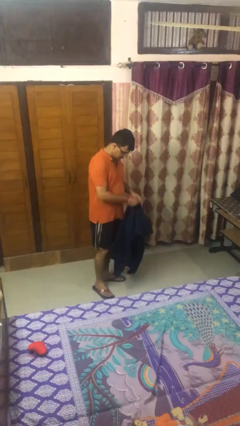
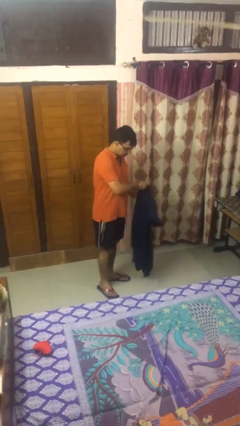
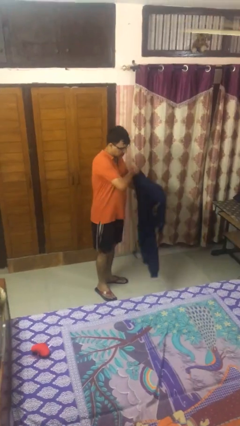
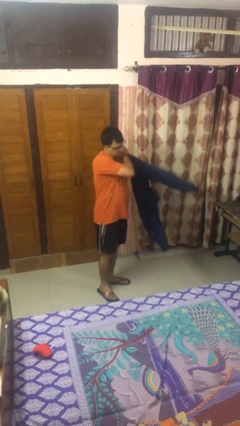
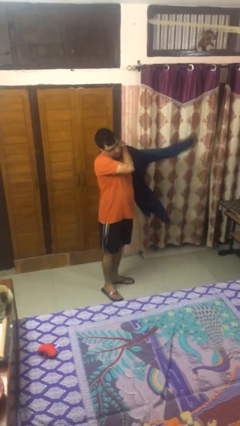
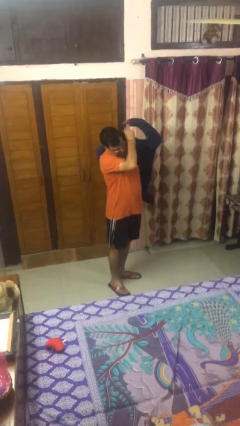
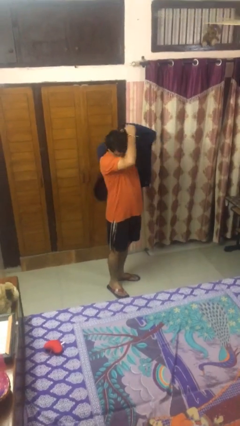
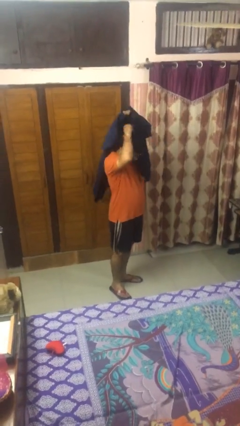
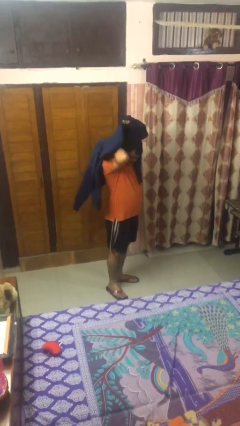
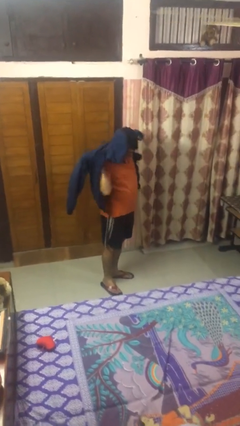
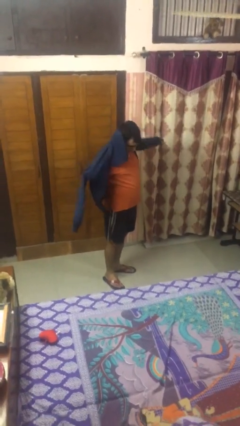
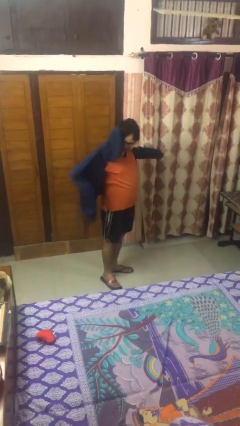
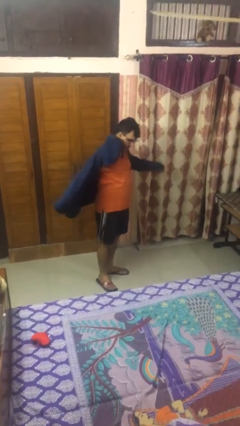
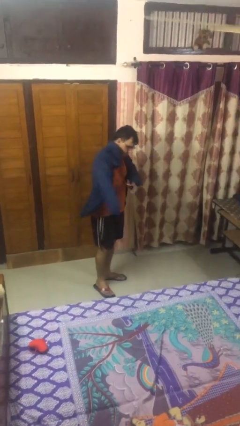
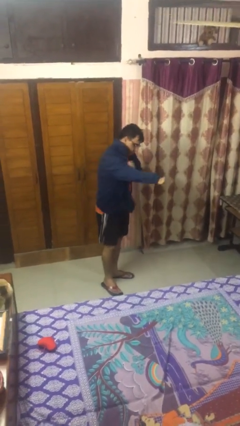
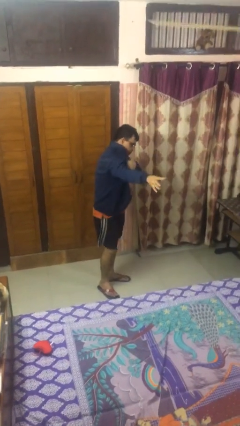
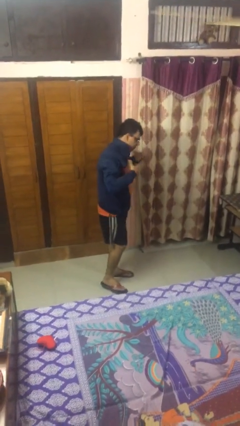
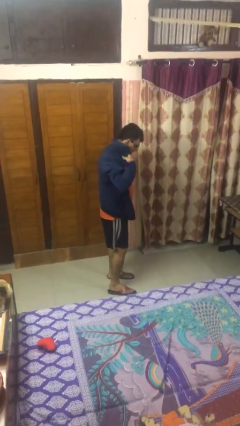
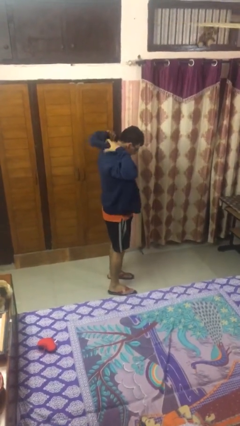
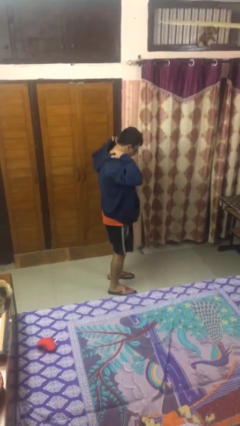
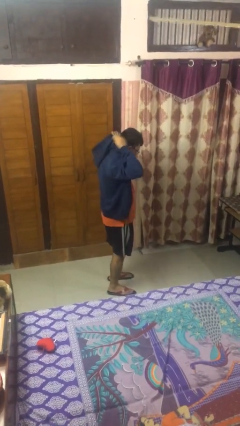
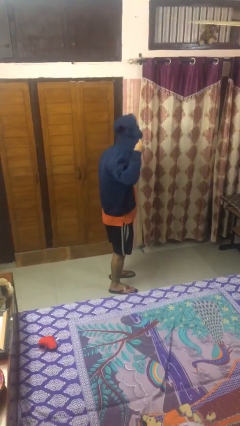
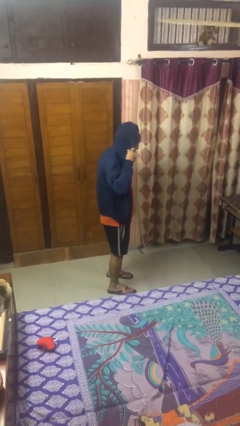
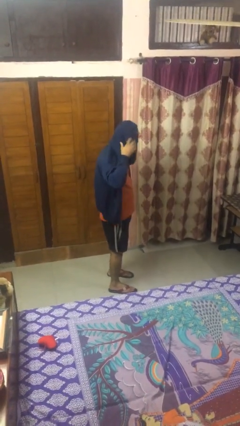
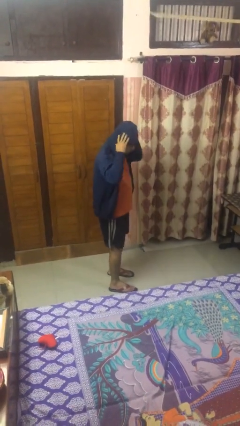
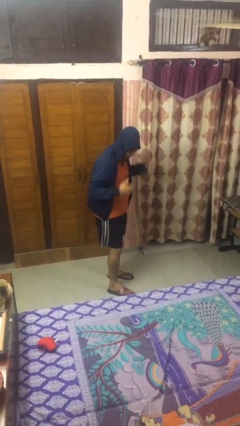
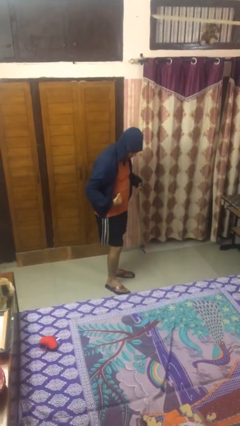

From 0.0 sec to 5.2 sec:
person puts on hoodie

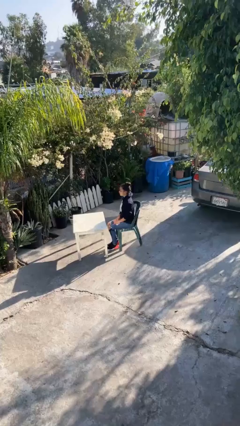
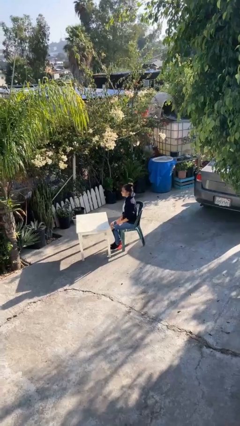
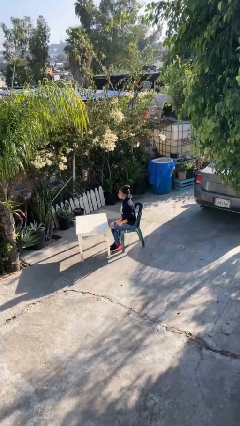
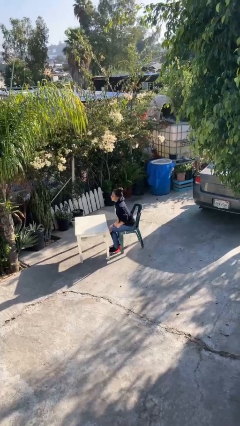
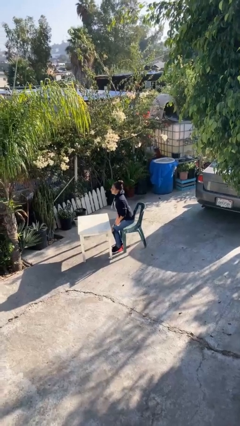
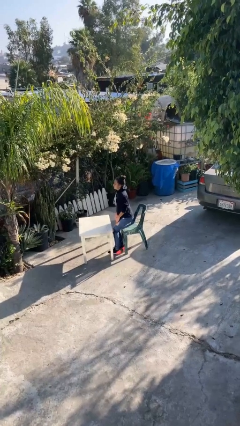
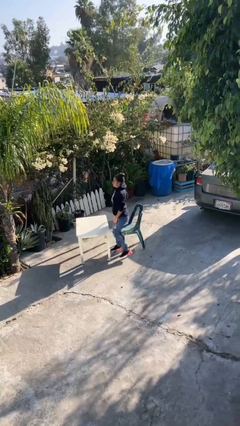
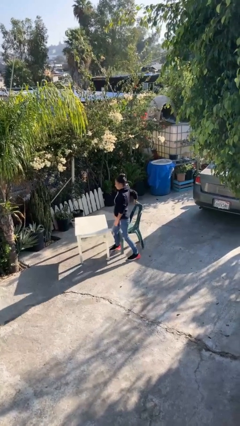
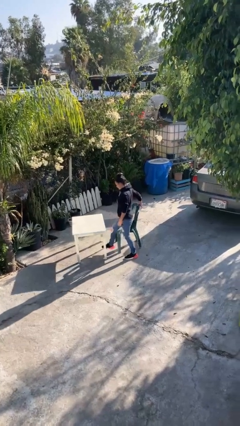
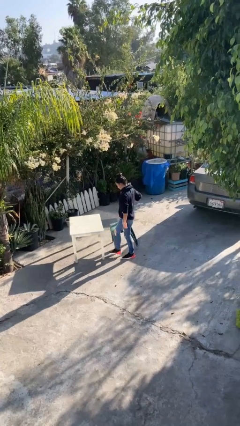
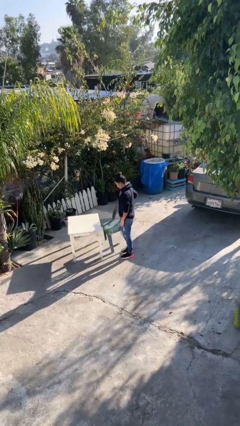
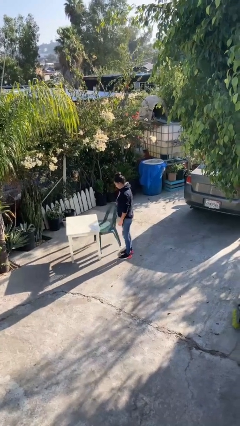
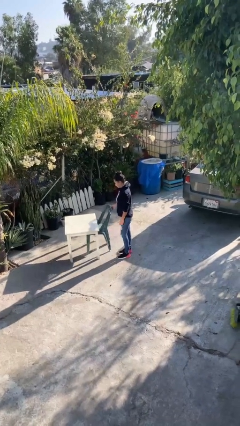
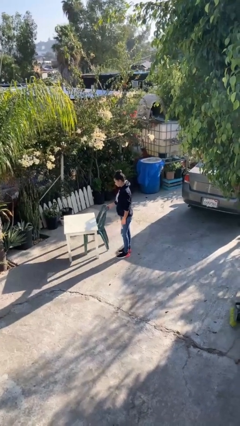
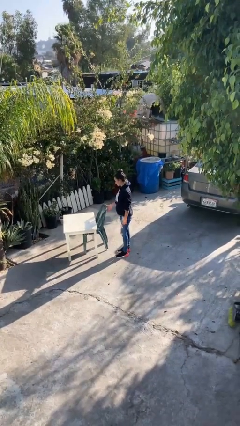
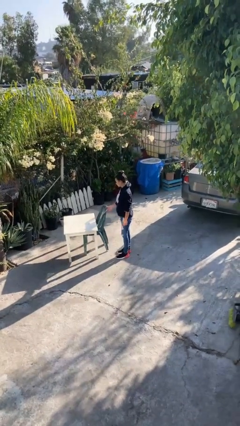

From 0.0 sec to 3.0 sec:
person stands up

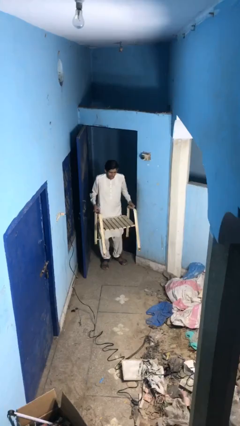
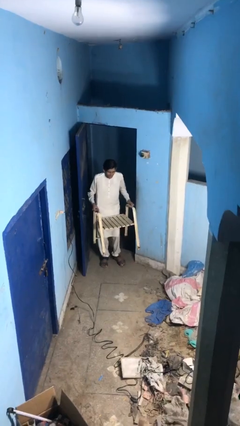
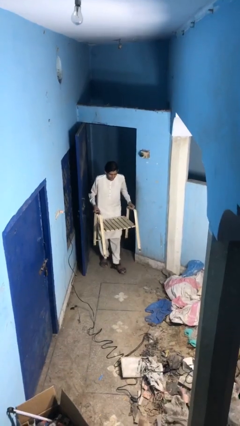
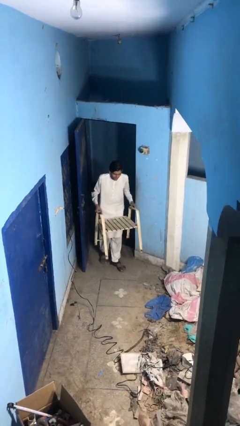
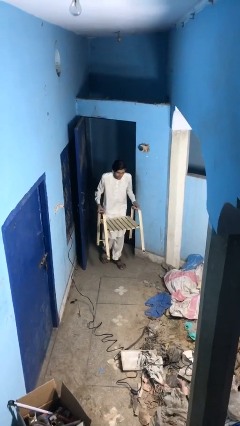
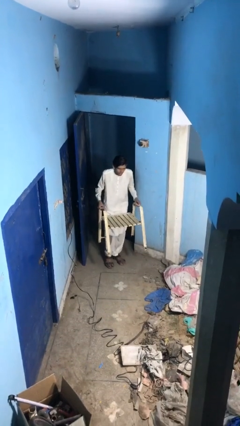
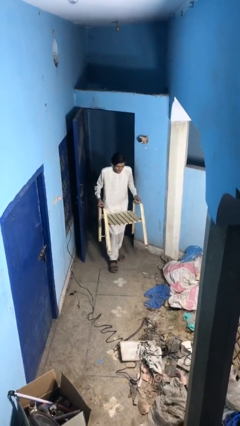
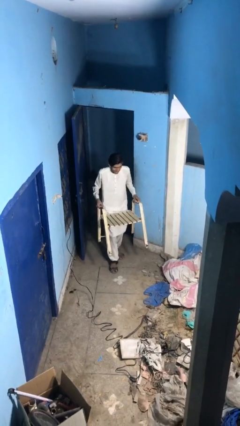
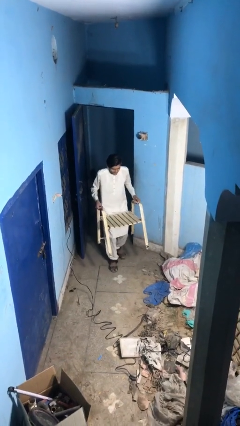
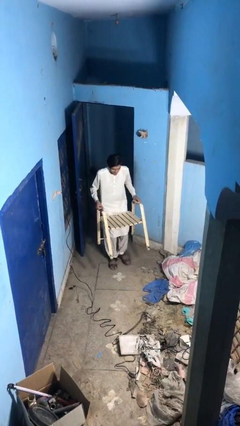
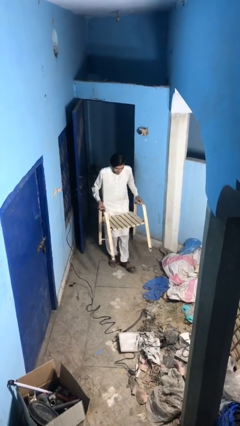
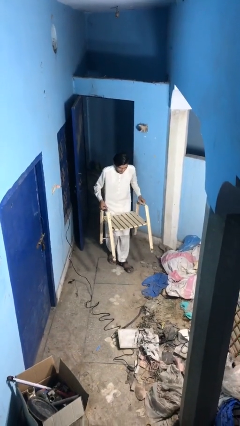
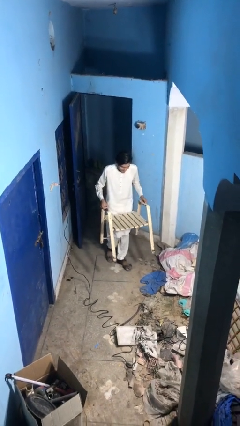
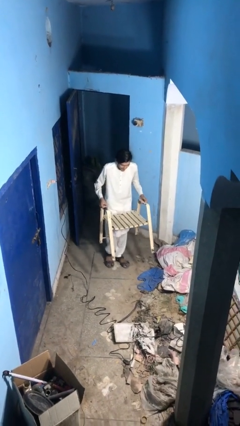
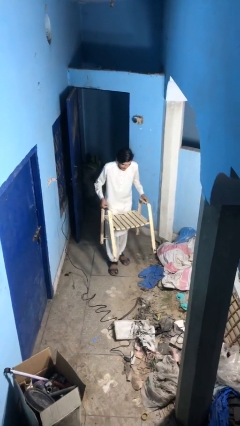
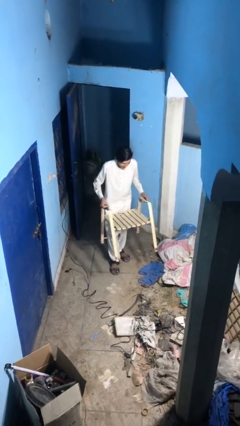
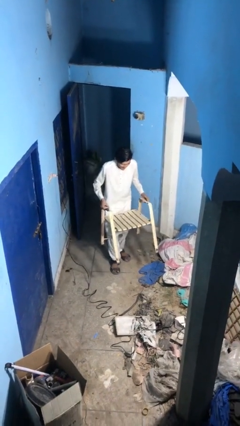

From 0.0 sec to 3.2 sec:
person carries heavy object

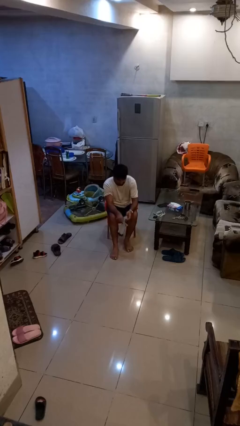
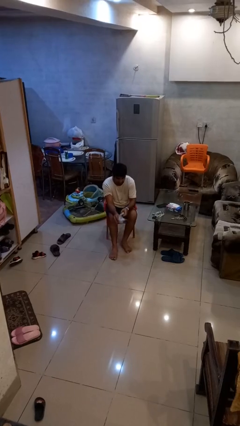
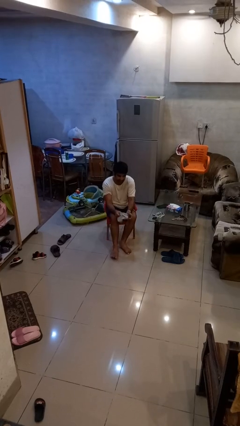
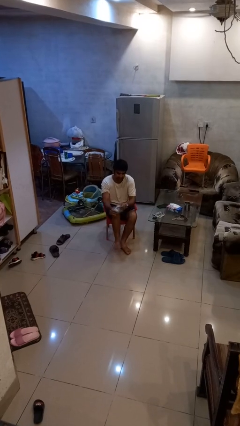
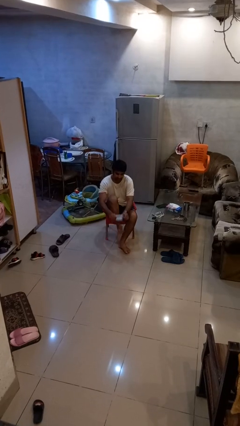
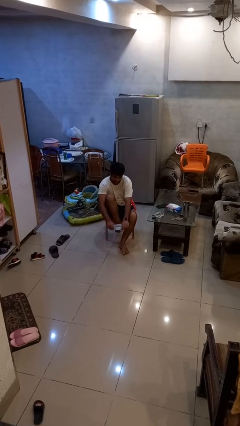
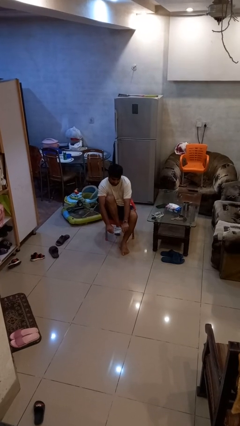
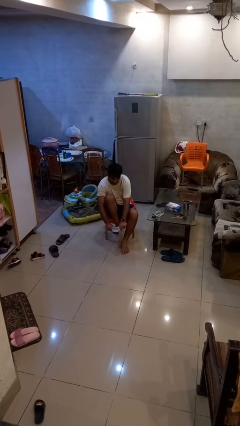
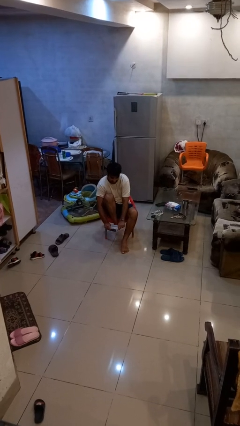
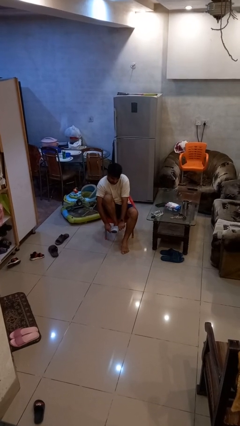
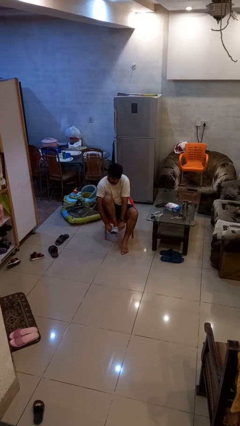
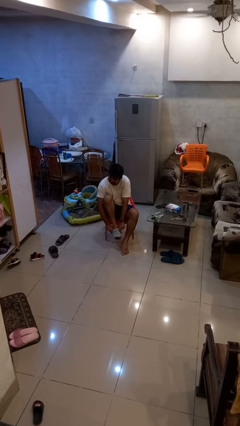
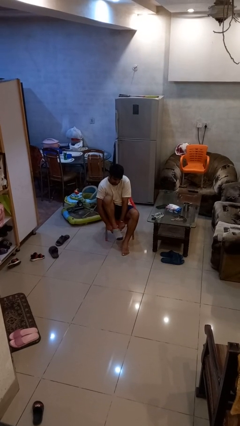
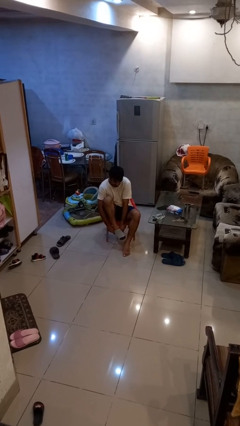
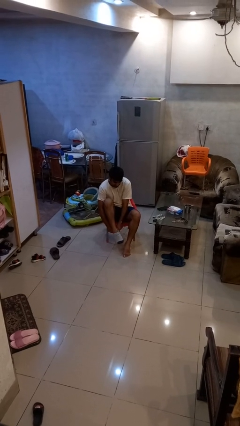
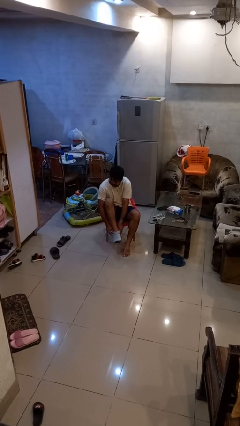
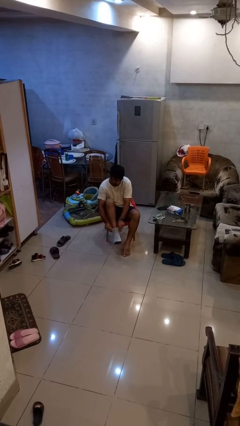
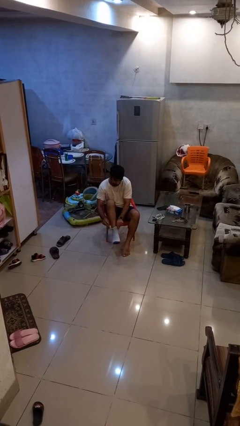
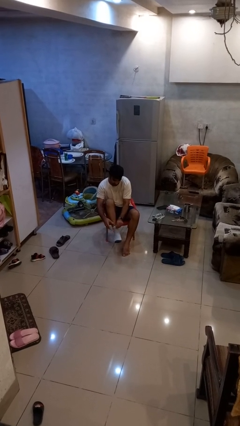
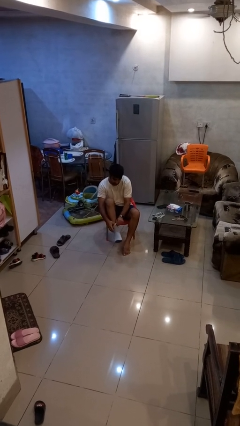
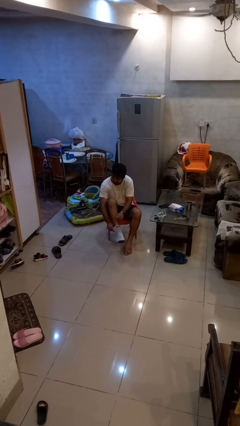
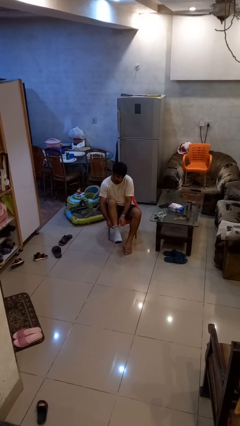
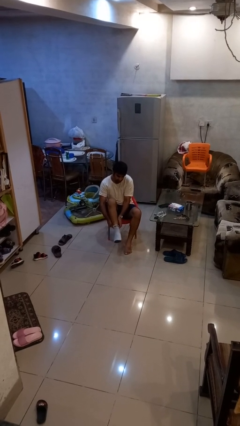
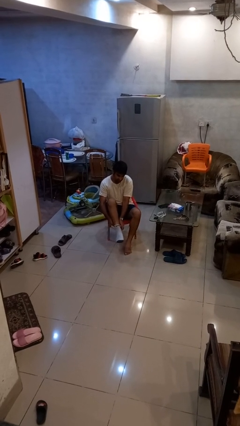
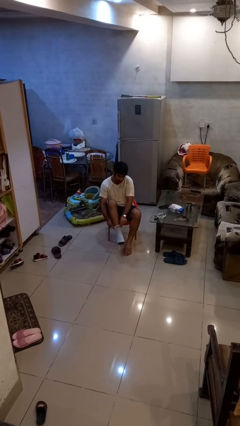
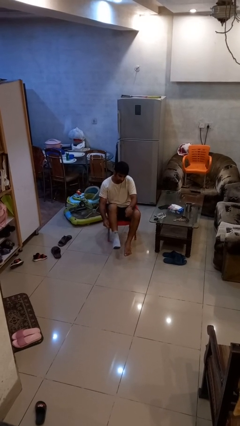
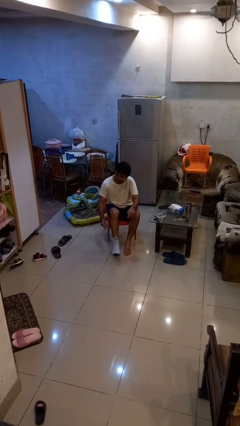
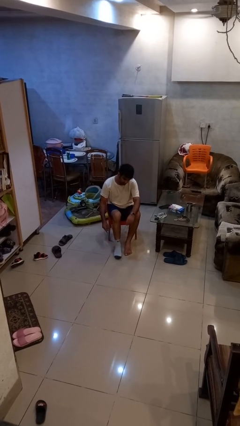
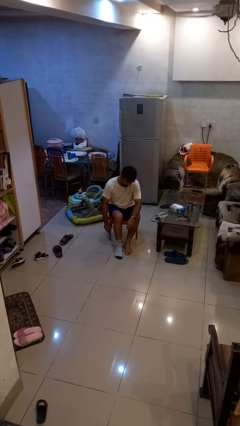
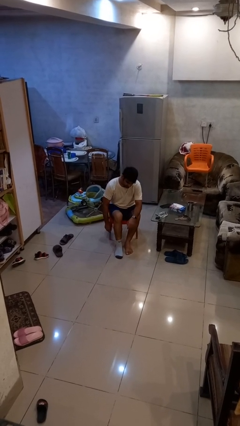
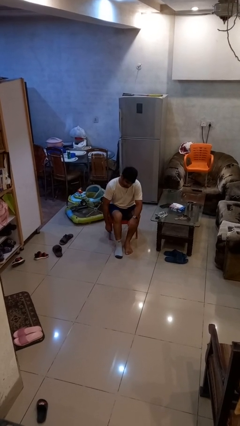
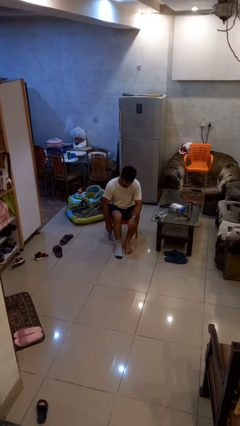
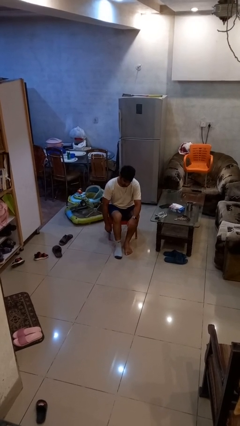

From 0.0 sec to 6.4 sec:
person puts on socks
